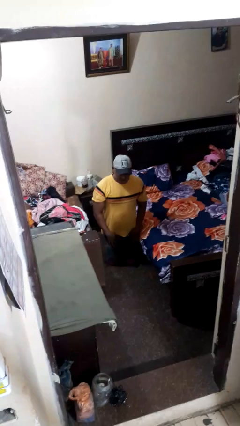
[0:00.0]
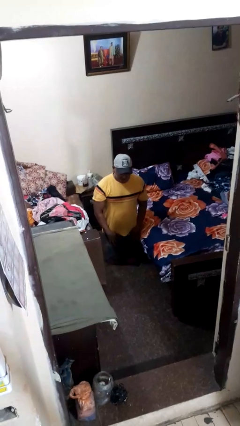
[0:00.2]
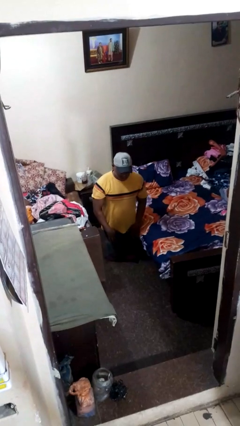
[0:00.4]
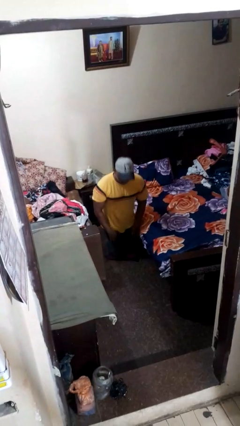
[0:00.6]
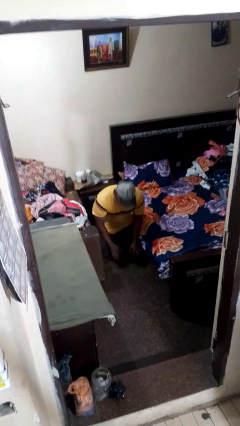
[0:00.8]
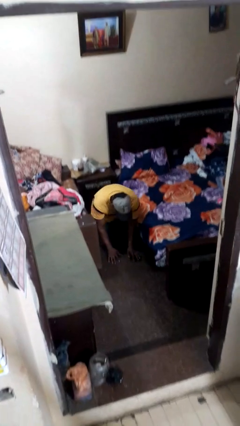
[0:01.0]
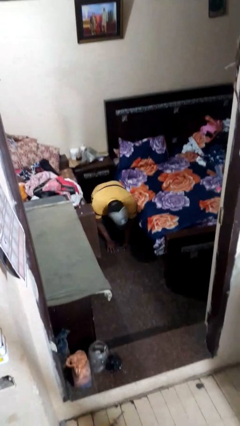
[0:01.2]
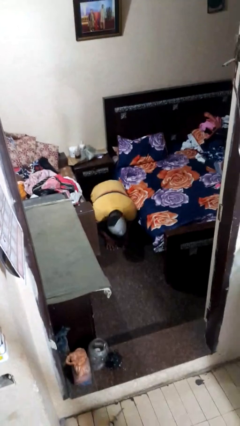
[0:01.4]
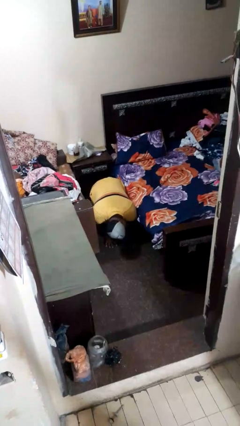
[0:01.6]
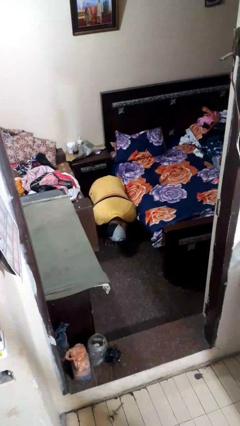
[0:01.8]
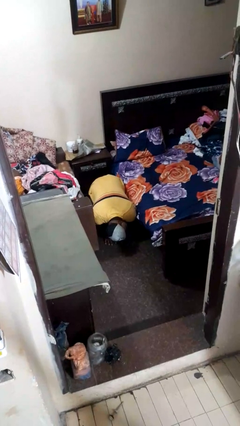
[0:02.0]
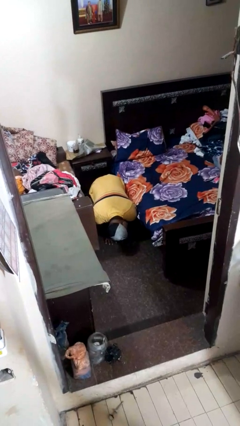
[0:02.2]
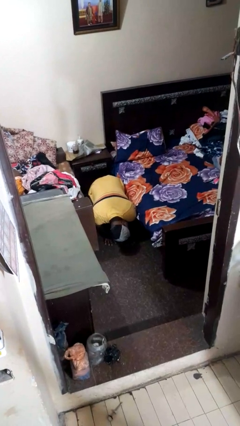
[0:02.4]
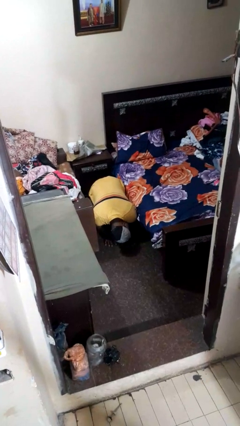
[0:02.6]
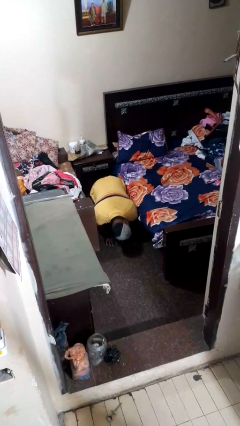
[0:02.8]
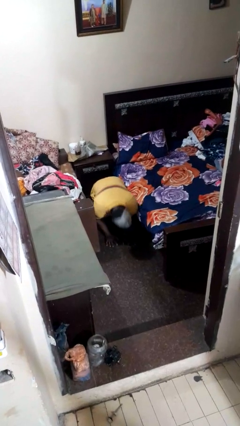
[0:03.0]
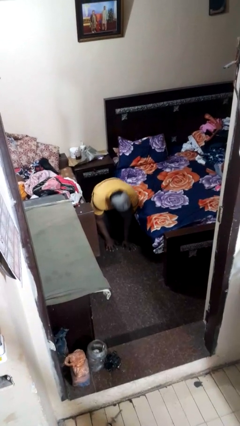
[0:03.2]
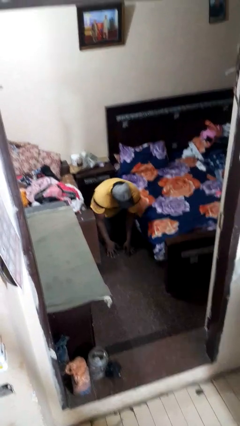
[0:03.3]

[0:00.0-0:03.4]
person searches under bed

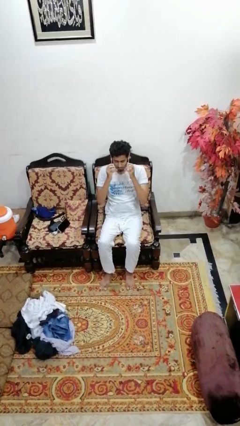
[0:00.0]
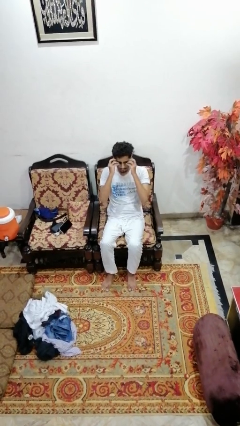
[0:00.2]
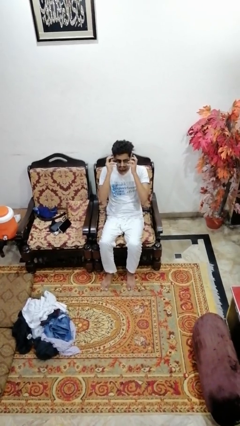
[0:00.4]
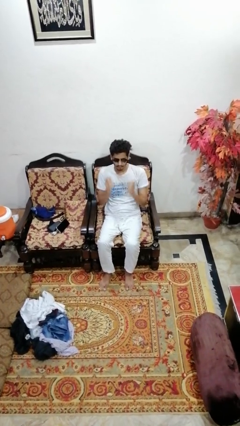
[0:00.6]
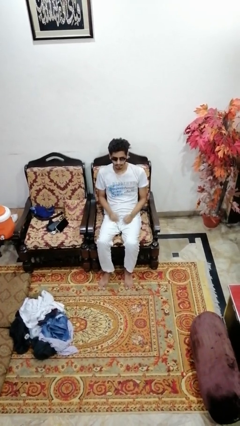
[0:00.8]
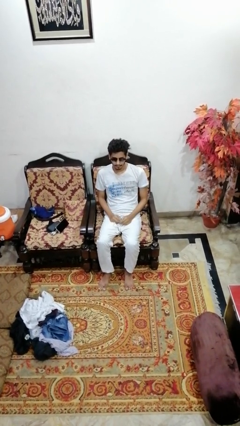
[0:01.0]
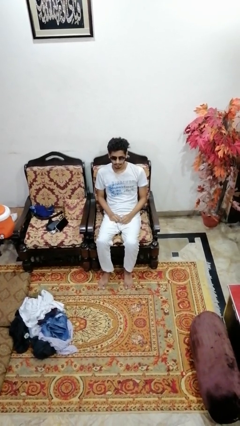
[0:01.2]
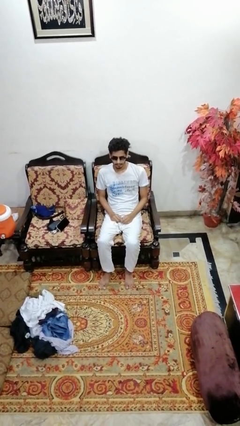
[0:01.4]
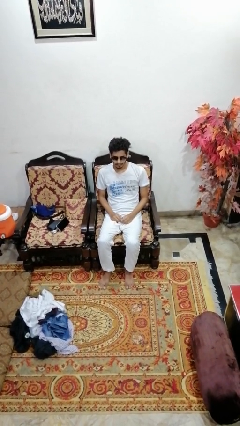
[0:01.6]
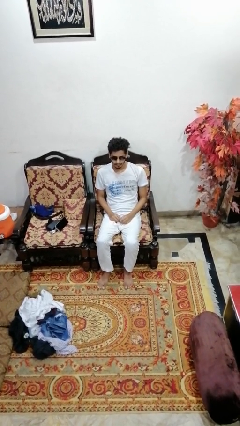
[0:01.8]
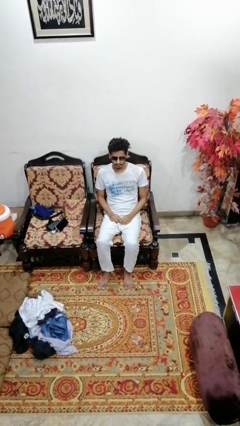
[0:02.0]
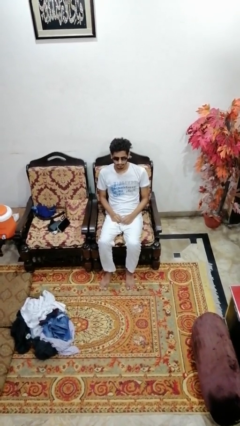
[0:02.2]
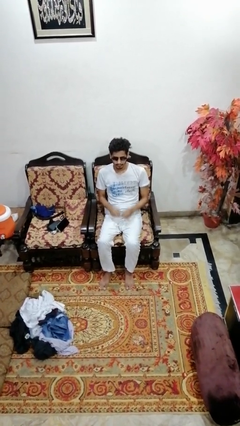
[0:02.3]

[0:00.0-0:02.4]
person puts on sunglasses

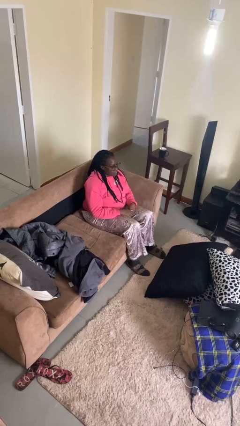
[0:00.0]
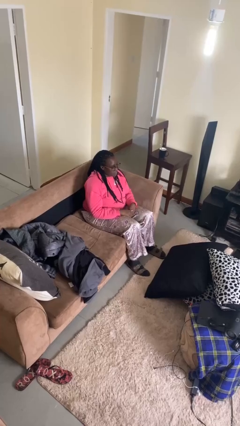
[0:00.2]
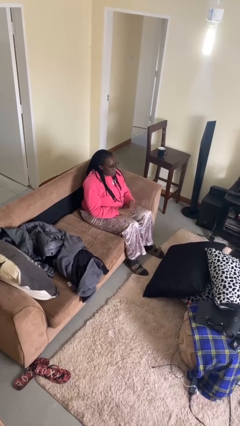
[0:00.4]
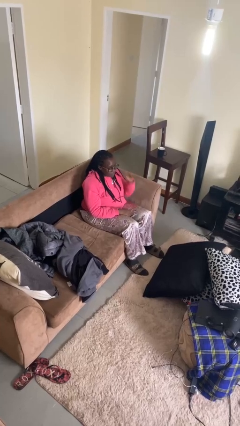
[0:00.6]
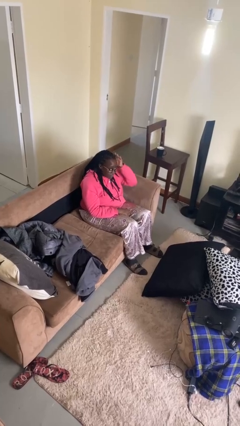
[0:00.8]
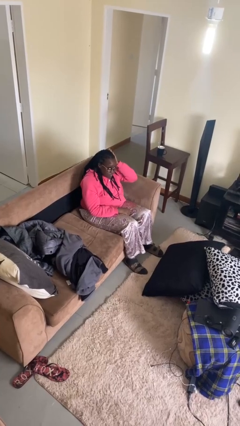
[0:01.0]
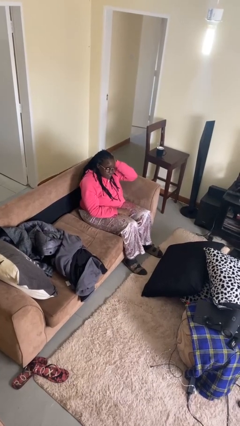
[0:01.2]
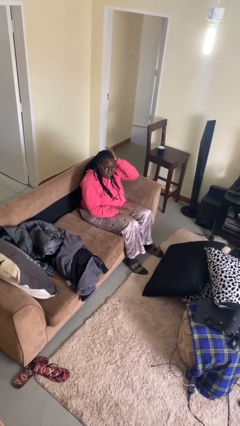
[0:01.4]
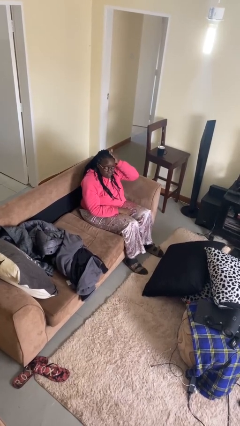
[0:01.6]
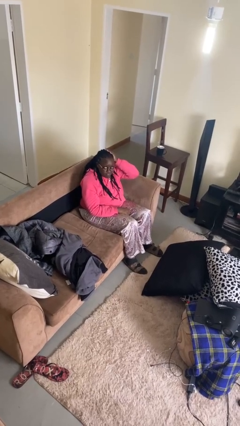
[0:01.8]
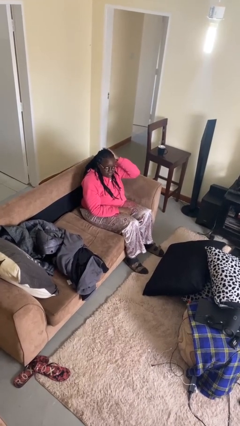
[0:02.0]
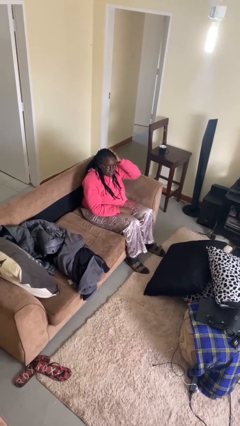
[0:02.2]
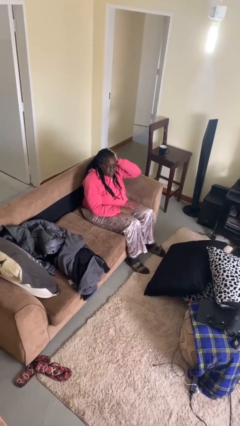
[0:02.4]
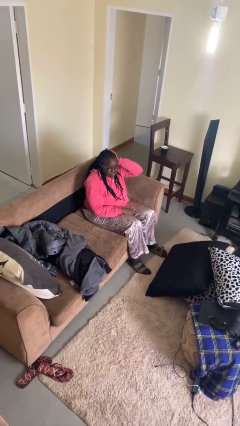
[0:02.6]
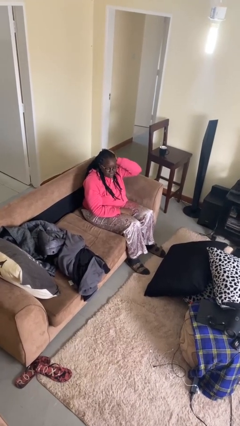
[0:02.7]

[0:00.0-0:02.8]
person strokes hair

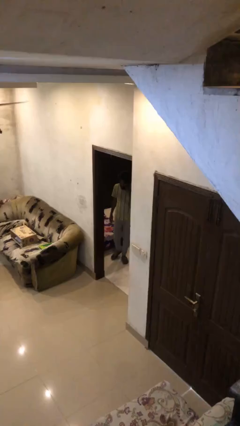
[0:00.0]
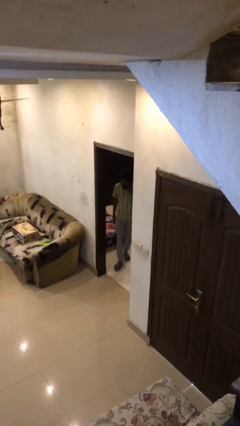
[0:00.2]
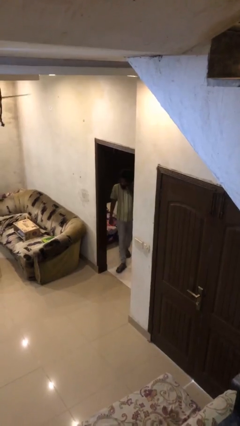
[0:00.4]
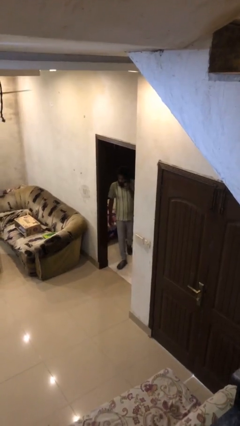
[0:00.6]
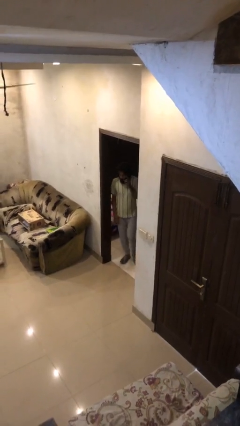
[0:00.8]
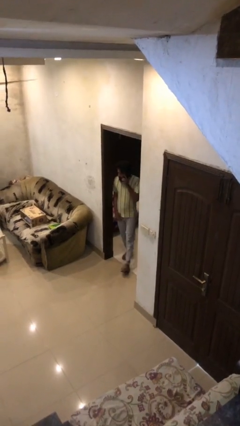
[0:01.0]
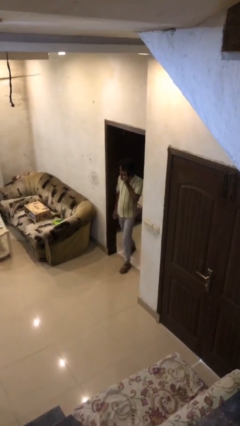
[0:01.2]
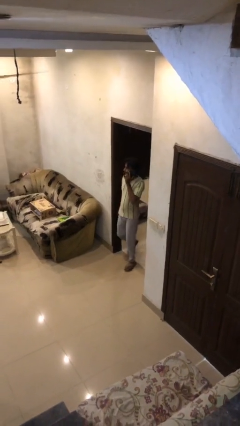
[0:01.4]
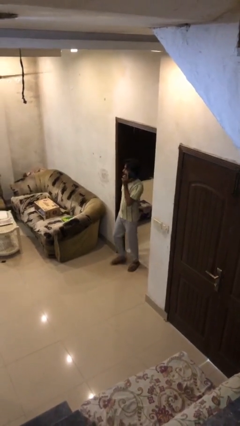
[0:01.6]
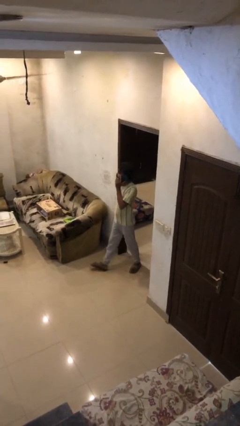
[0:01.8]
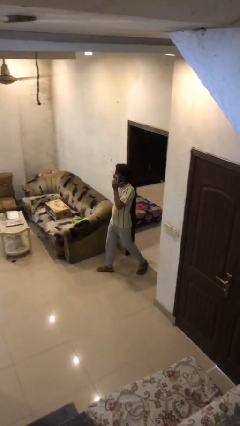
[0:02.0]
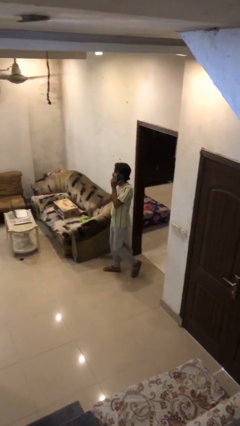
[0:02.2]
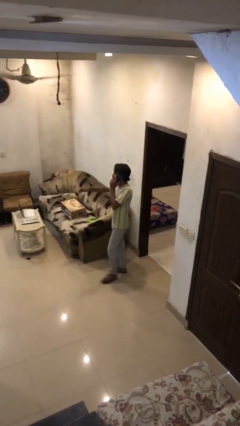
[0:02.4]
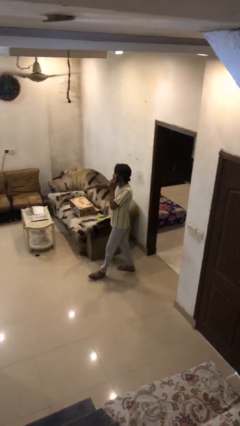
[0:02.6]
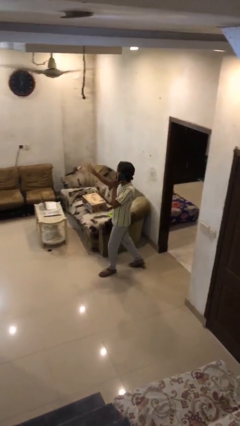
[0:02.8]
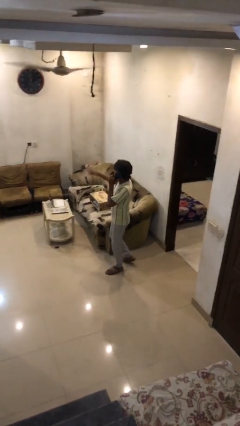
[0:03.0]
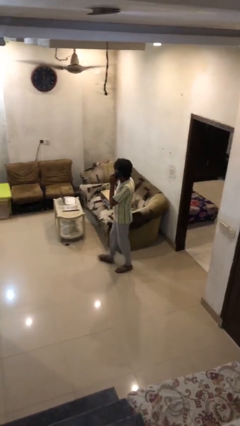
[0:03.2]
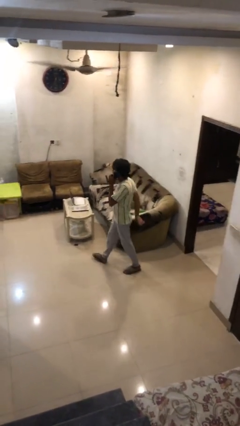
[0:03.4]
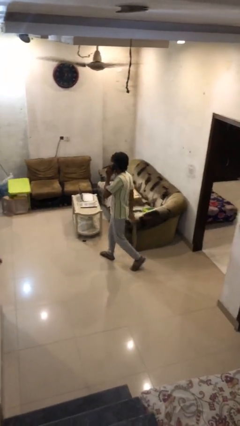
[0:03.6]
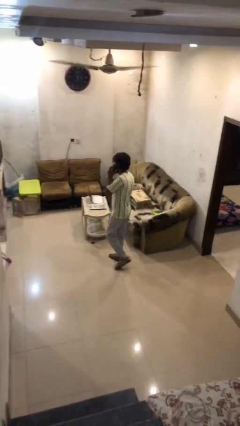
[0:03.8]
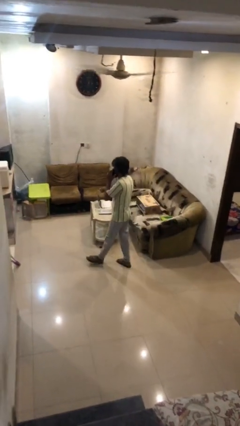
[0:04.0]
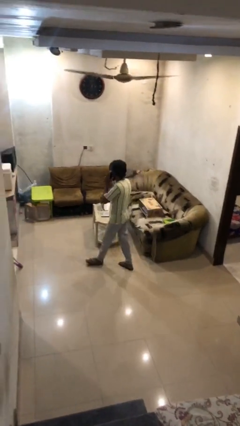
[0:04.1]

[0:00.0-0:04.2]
person enters scene through structure

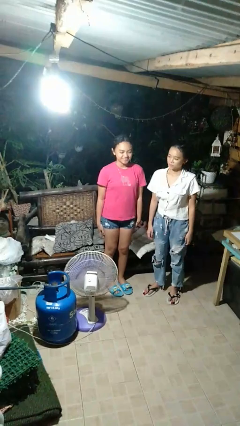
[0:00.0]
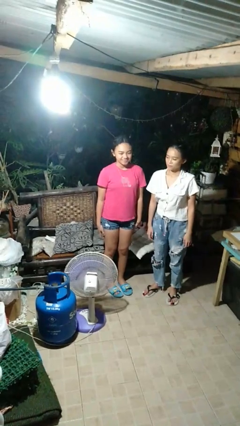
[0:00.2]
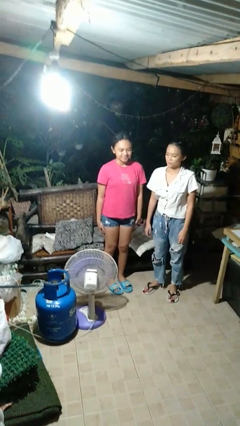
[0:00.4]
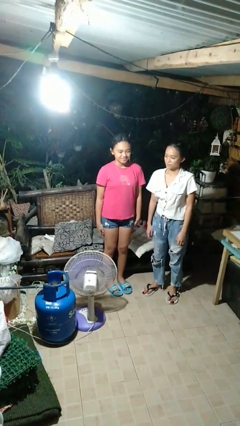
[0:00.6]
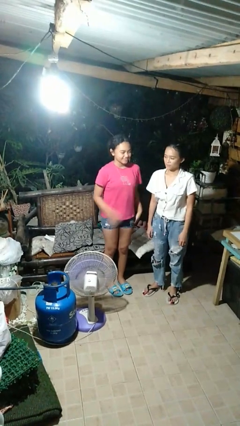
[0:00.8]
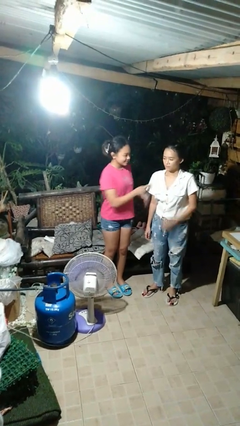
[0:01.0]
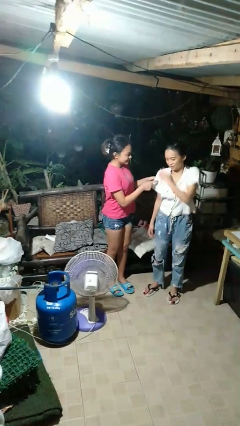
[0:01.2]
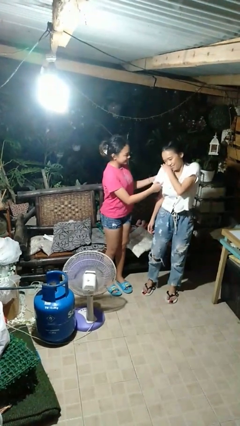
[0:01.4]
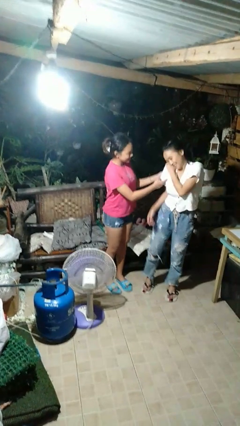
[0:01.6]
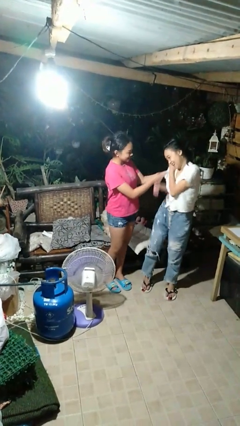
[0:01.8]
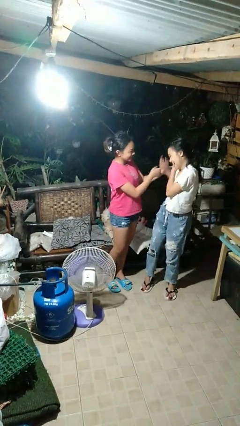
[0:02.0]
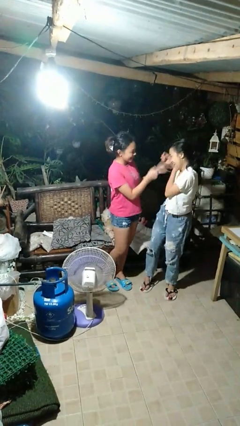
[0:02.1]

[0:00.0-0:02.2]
person tickles person

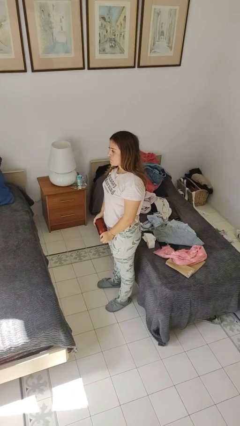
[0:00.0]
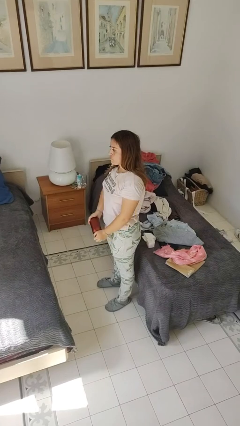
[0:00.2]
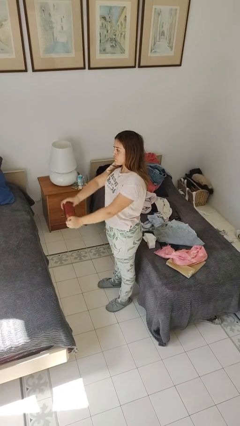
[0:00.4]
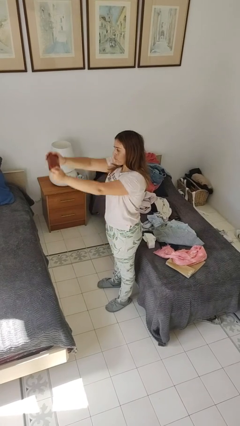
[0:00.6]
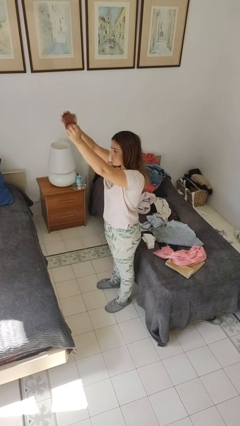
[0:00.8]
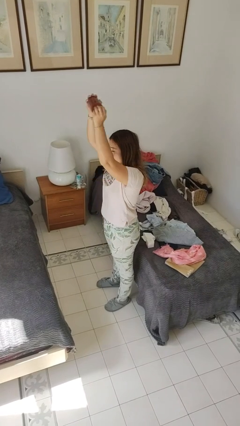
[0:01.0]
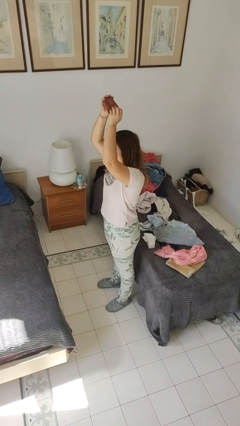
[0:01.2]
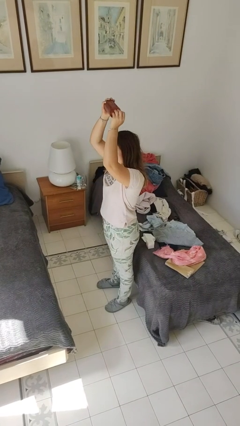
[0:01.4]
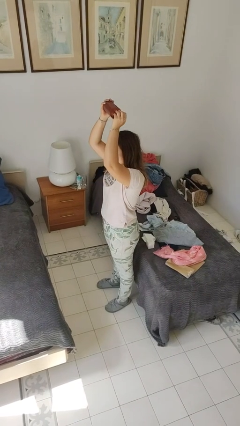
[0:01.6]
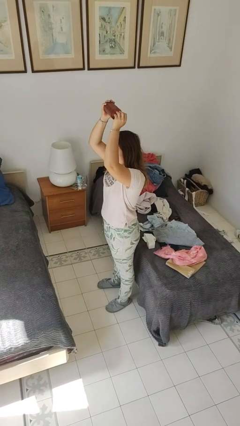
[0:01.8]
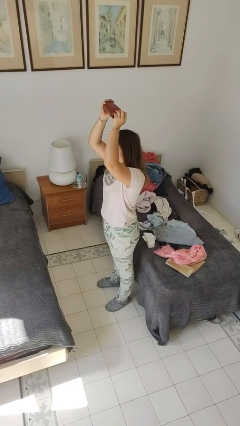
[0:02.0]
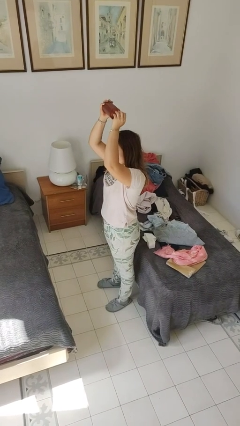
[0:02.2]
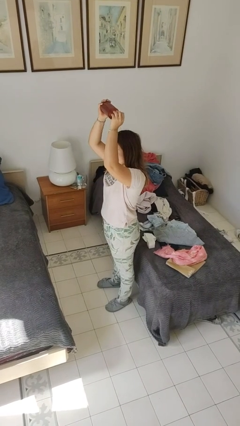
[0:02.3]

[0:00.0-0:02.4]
person holds object above head
